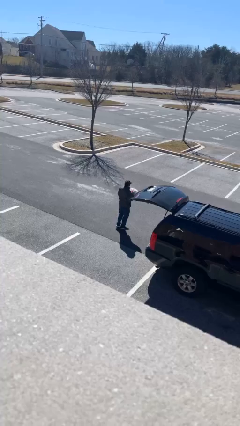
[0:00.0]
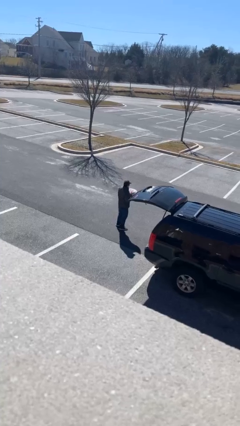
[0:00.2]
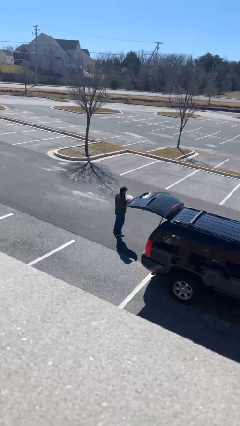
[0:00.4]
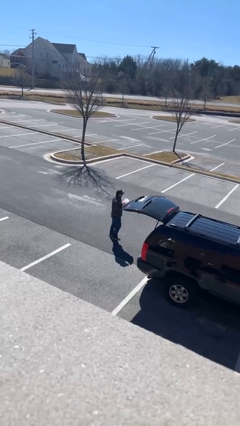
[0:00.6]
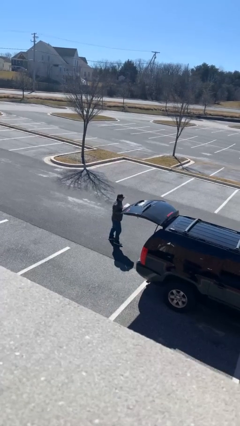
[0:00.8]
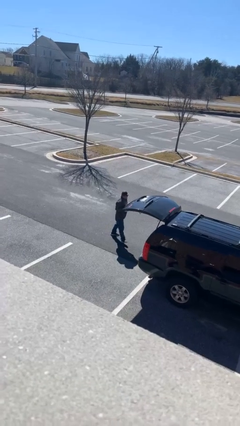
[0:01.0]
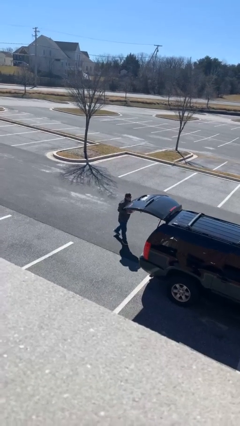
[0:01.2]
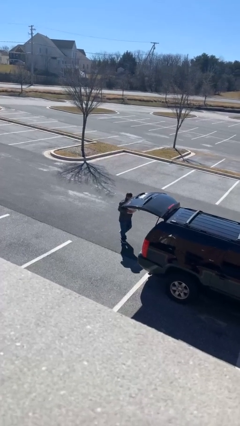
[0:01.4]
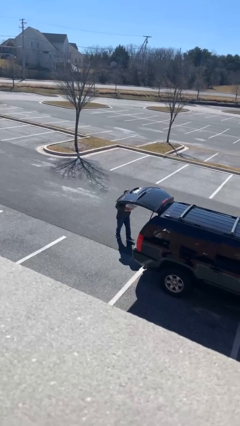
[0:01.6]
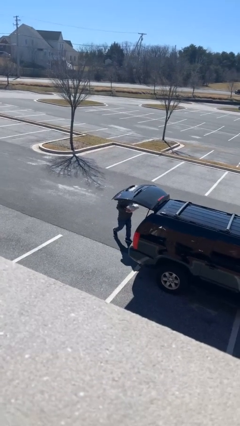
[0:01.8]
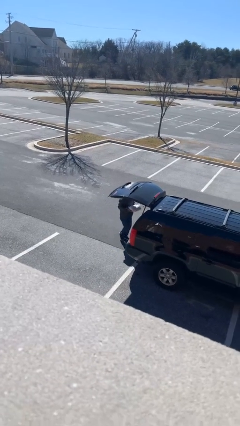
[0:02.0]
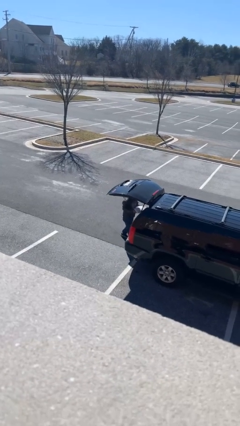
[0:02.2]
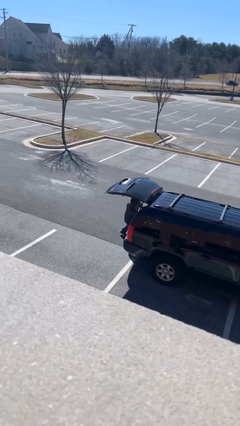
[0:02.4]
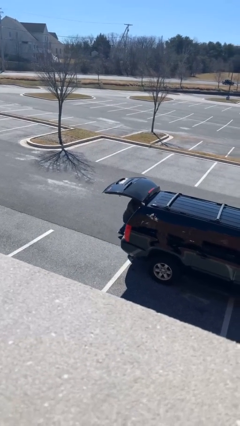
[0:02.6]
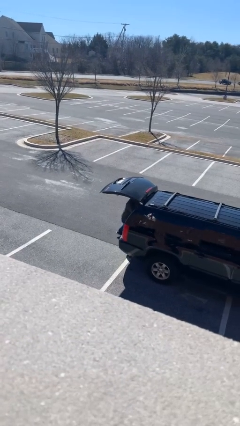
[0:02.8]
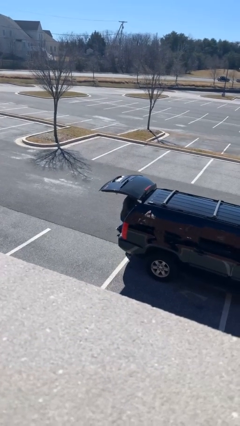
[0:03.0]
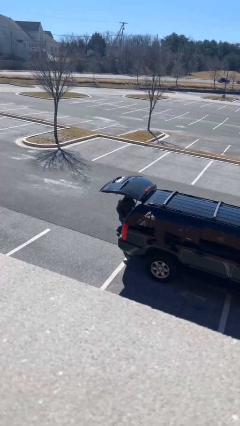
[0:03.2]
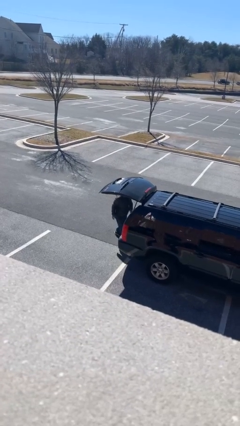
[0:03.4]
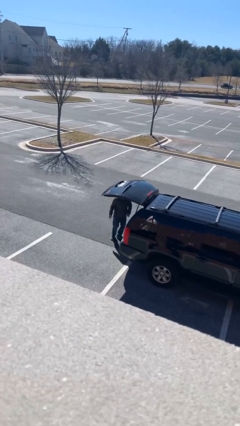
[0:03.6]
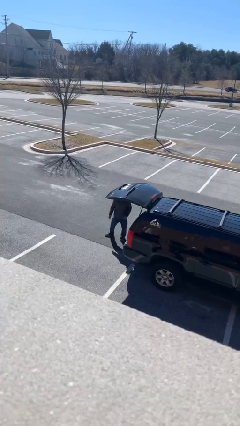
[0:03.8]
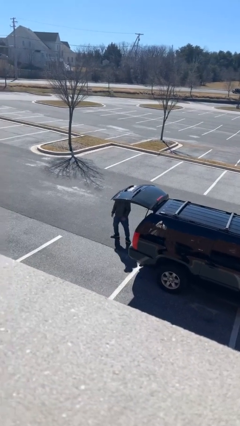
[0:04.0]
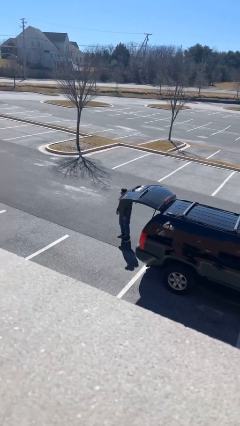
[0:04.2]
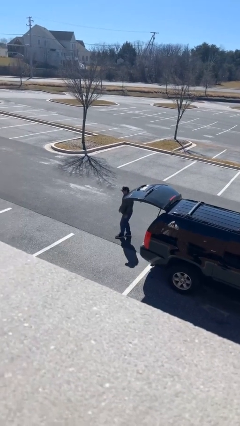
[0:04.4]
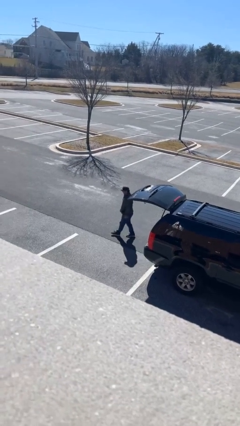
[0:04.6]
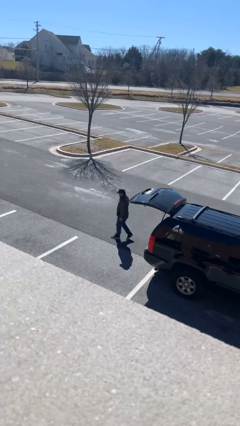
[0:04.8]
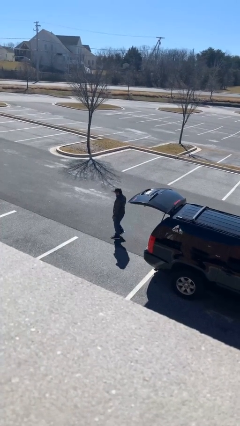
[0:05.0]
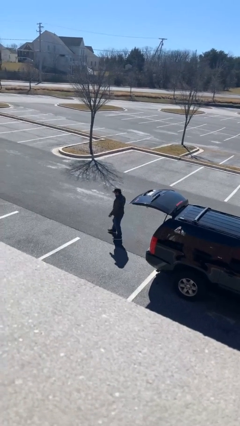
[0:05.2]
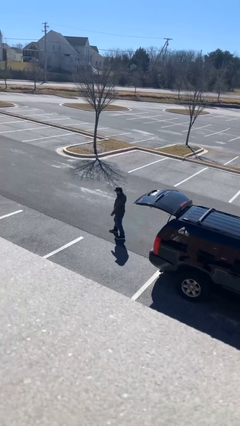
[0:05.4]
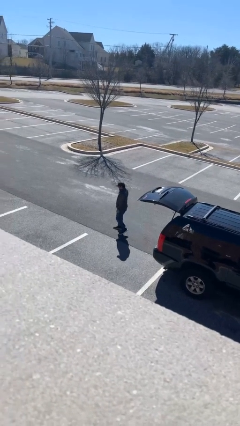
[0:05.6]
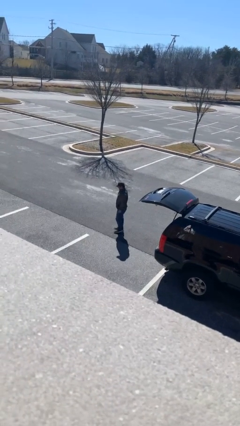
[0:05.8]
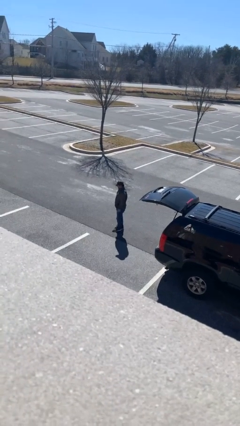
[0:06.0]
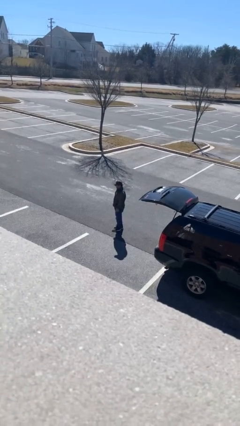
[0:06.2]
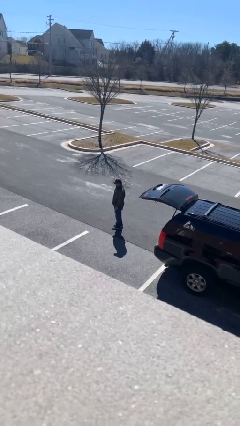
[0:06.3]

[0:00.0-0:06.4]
person loads car

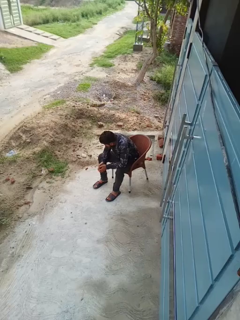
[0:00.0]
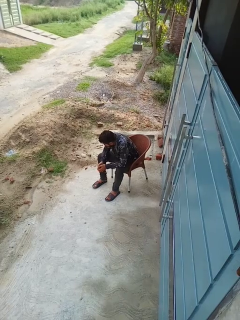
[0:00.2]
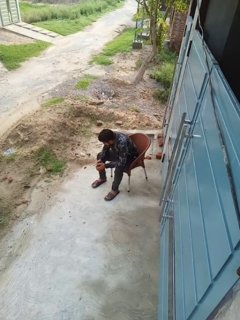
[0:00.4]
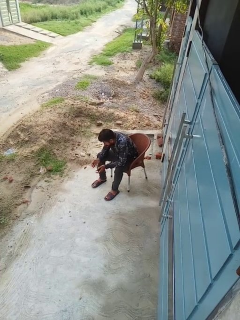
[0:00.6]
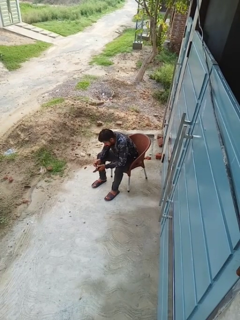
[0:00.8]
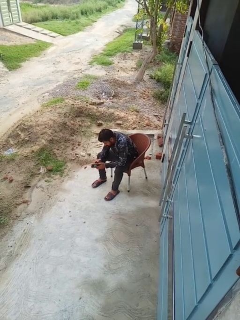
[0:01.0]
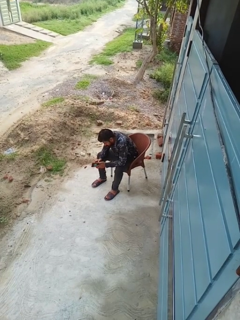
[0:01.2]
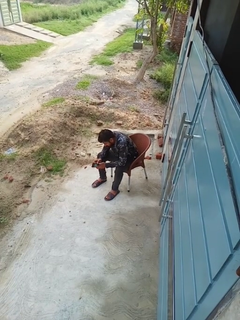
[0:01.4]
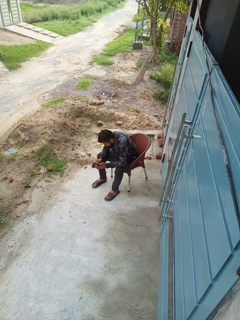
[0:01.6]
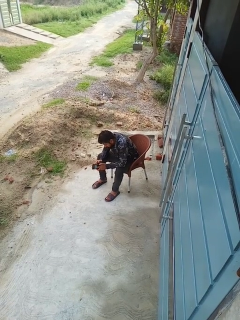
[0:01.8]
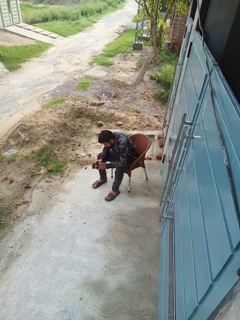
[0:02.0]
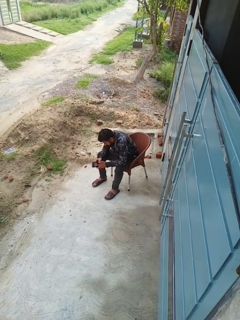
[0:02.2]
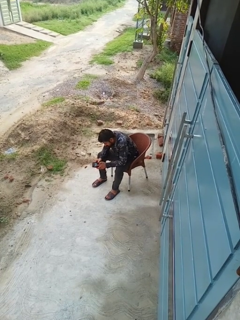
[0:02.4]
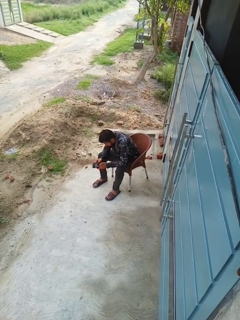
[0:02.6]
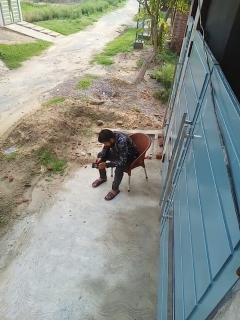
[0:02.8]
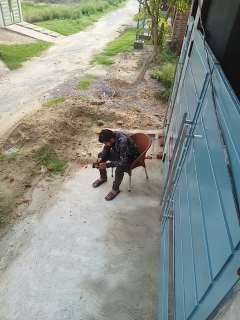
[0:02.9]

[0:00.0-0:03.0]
person searches in purse

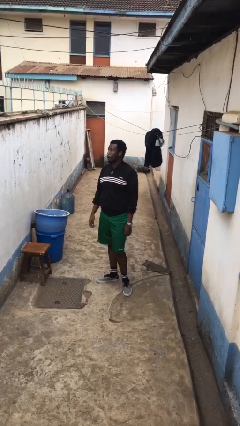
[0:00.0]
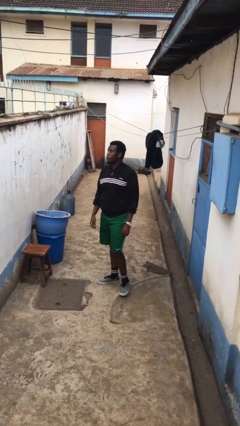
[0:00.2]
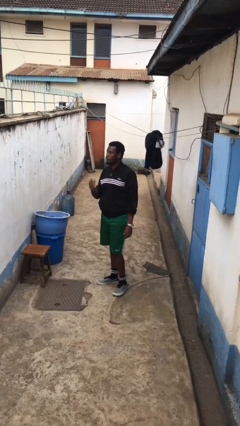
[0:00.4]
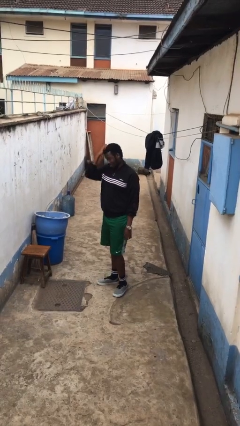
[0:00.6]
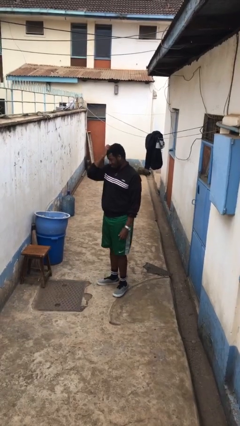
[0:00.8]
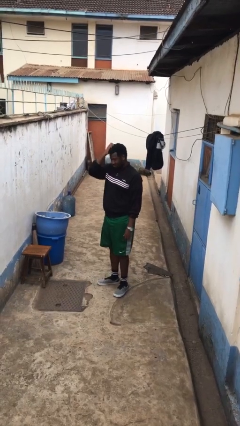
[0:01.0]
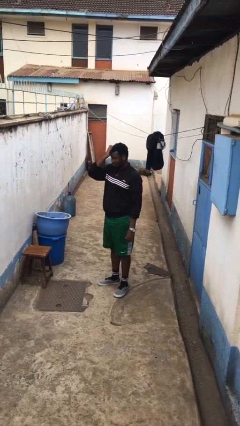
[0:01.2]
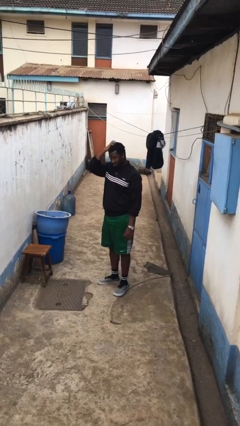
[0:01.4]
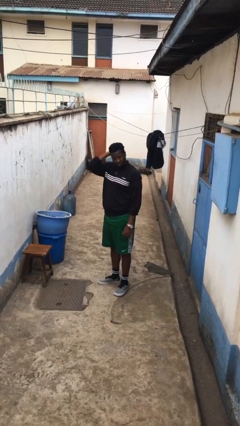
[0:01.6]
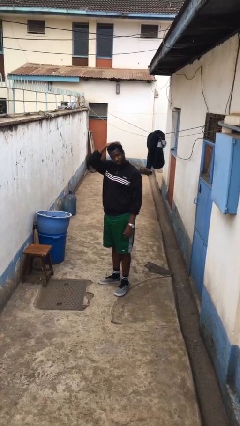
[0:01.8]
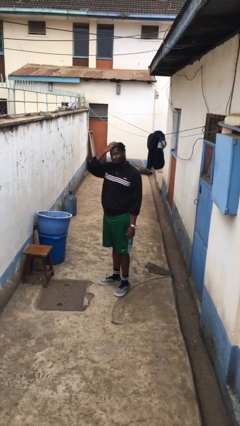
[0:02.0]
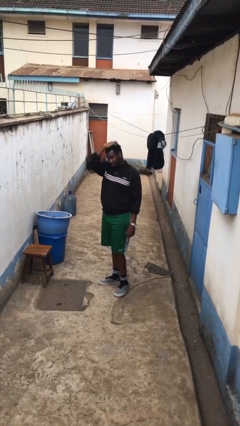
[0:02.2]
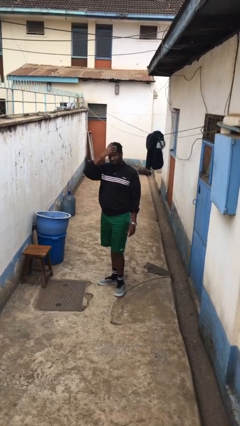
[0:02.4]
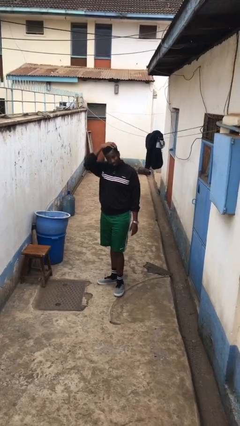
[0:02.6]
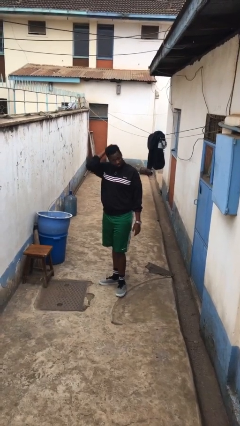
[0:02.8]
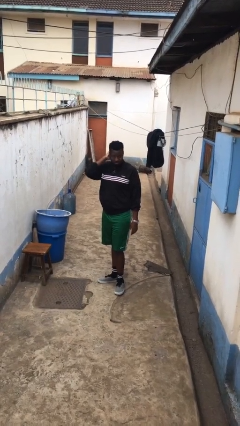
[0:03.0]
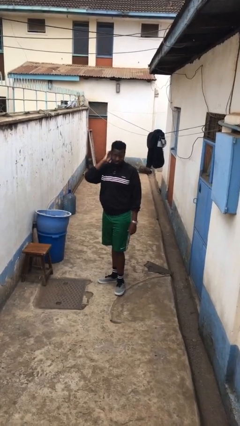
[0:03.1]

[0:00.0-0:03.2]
person scratches face

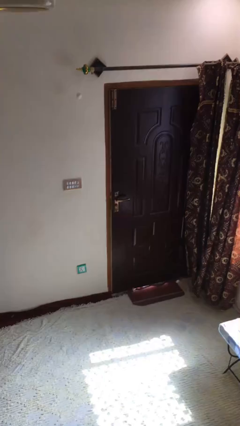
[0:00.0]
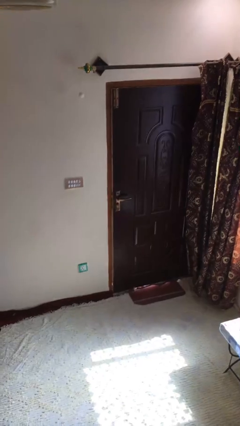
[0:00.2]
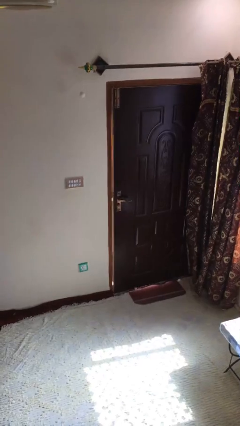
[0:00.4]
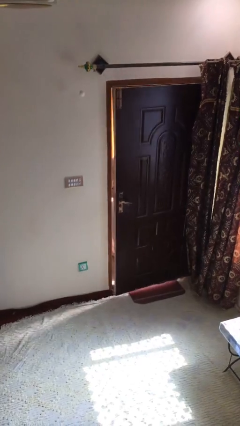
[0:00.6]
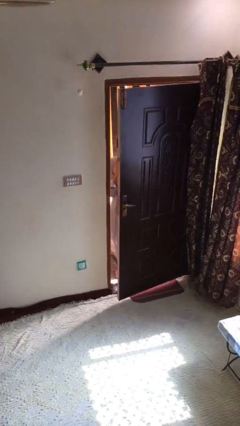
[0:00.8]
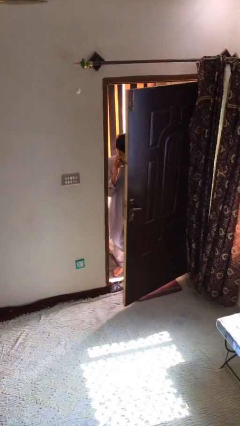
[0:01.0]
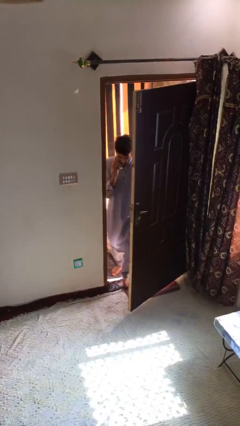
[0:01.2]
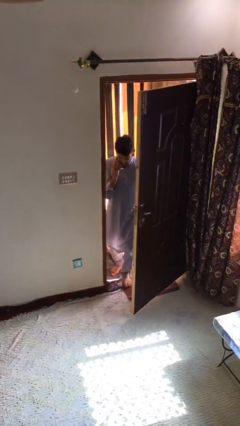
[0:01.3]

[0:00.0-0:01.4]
person opens facility door

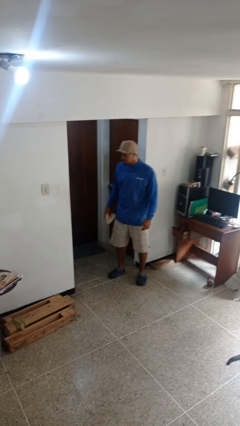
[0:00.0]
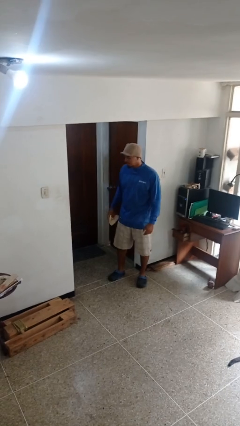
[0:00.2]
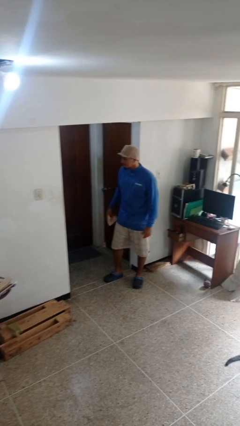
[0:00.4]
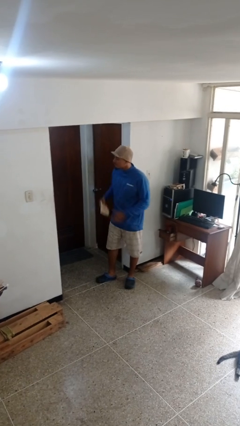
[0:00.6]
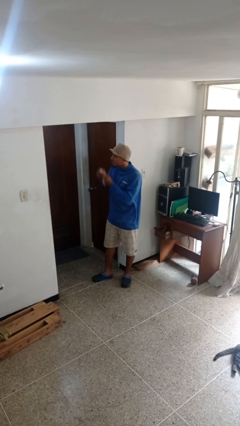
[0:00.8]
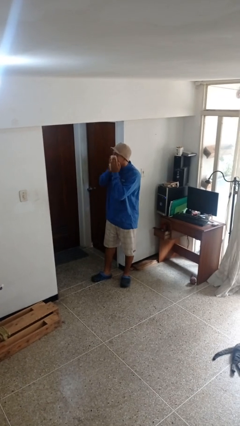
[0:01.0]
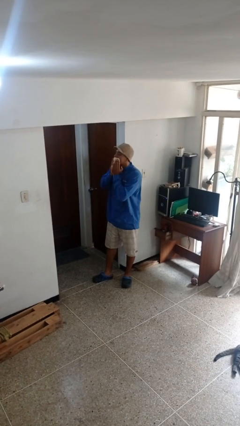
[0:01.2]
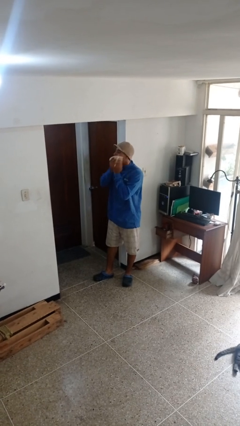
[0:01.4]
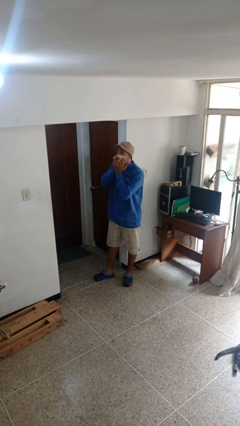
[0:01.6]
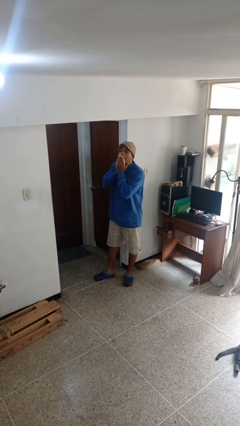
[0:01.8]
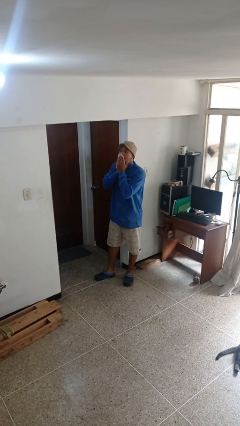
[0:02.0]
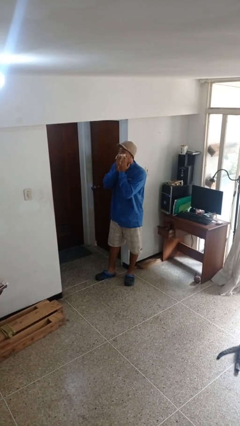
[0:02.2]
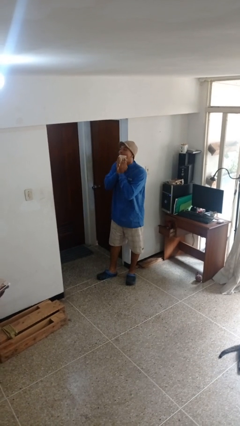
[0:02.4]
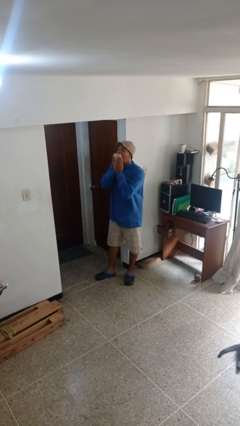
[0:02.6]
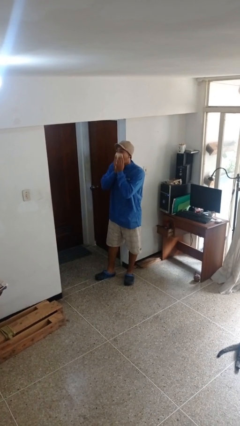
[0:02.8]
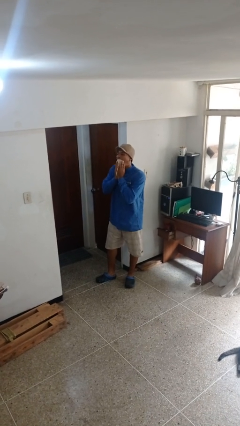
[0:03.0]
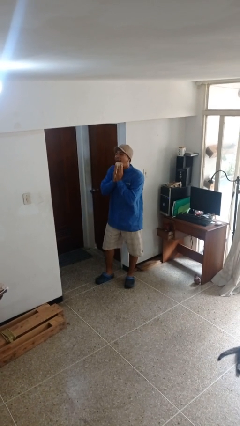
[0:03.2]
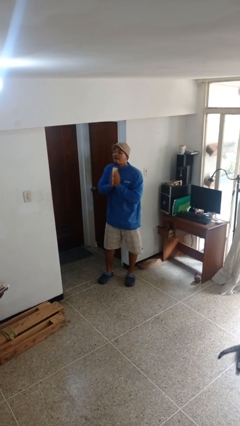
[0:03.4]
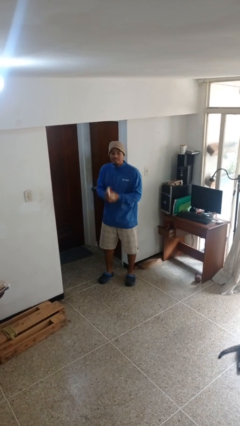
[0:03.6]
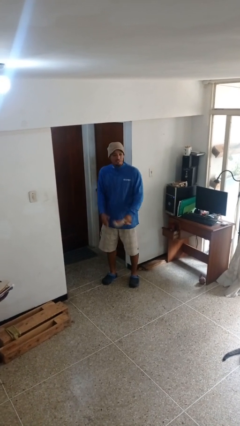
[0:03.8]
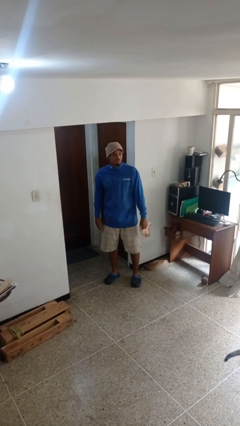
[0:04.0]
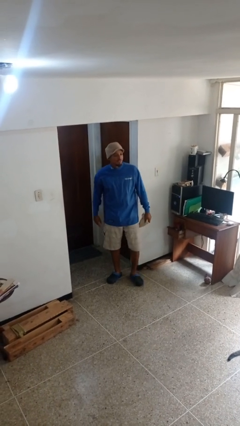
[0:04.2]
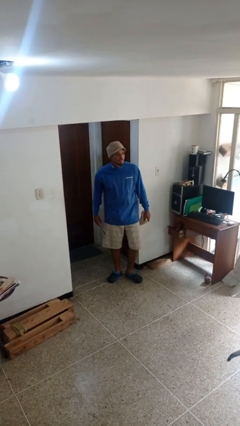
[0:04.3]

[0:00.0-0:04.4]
person wipes mouth with napkin
